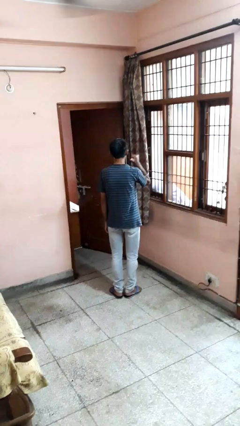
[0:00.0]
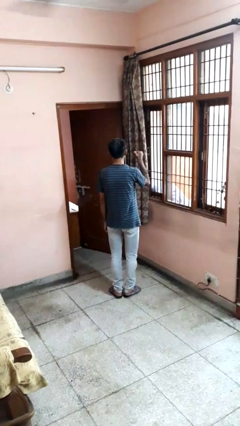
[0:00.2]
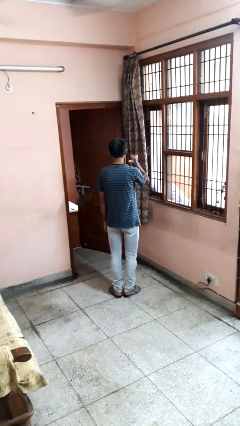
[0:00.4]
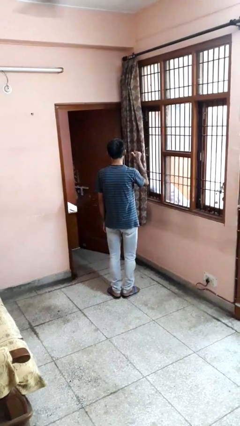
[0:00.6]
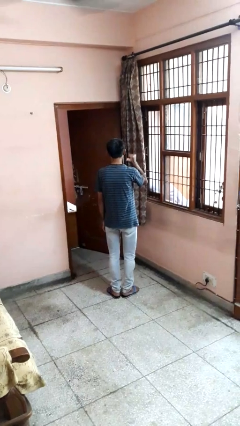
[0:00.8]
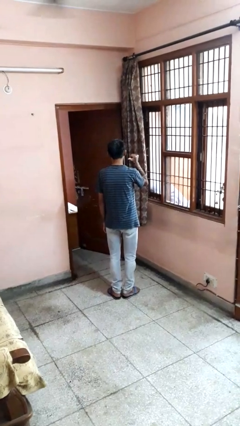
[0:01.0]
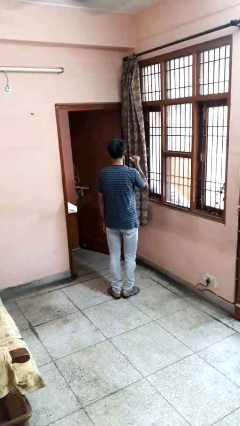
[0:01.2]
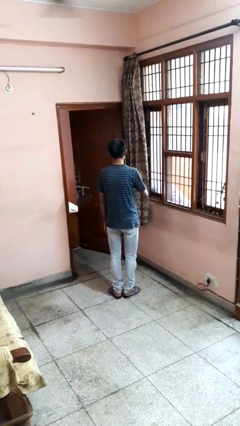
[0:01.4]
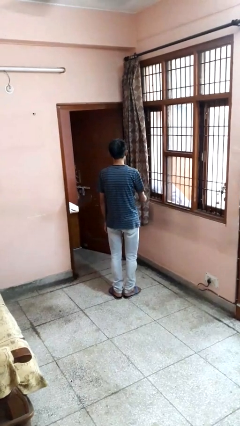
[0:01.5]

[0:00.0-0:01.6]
person gestures behind me

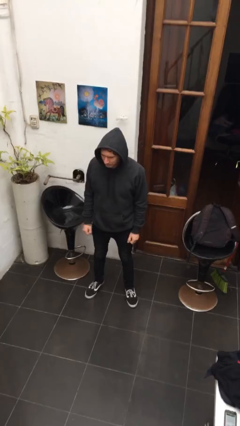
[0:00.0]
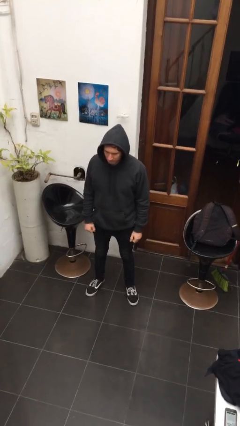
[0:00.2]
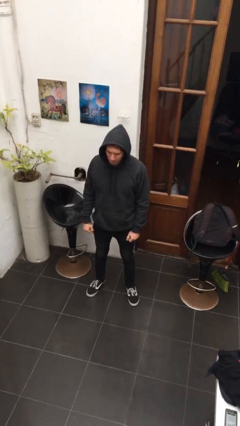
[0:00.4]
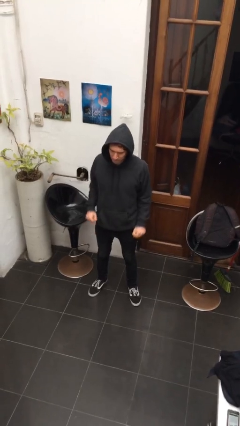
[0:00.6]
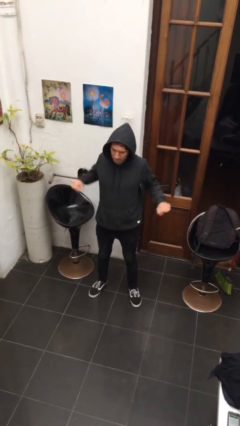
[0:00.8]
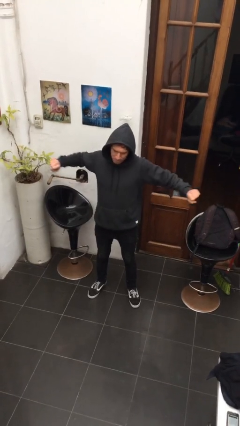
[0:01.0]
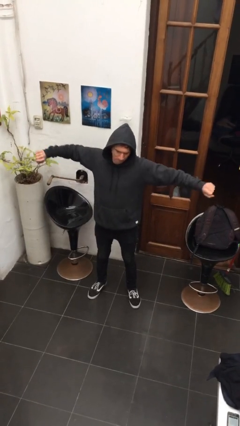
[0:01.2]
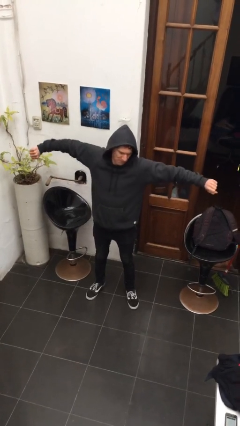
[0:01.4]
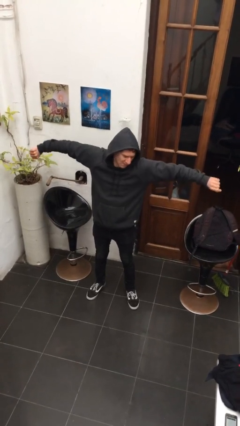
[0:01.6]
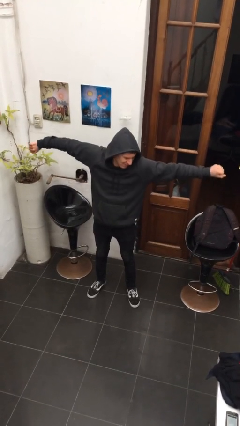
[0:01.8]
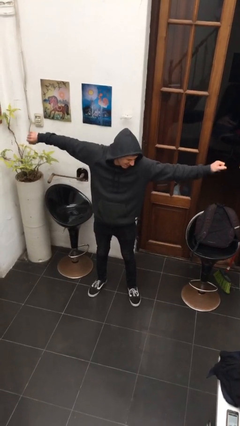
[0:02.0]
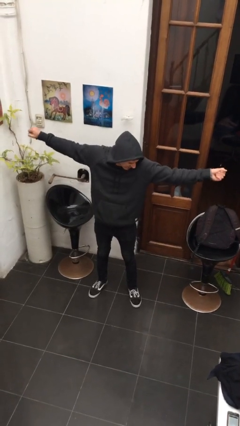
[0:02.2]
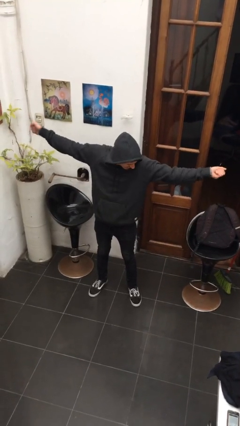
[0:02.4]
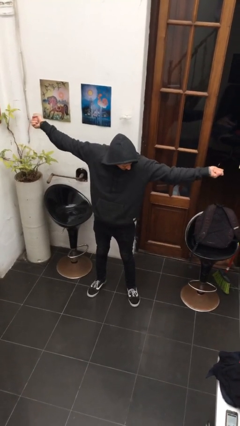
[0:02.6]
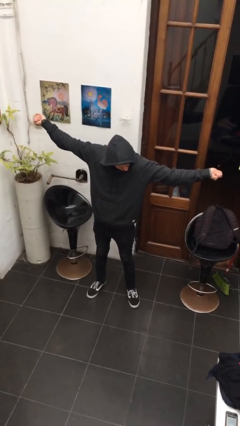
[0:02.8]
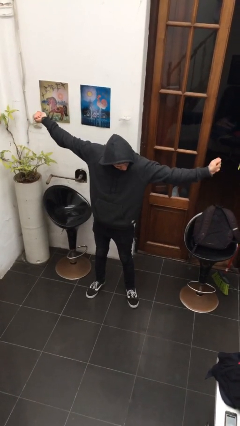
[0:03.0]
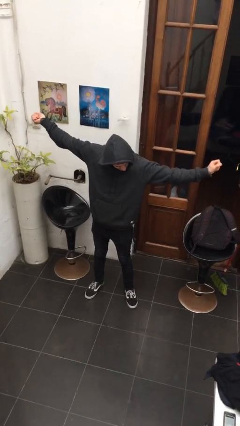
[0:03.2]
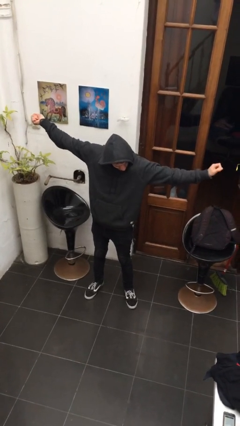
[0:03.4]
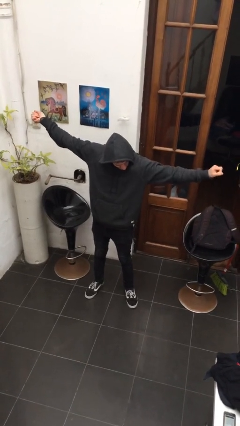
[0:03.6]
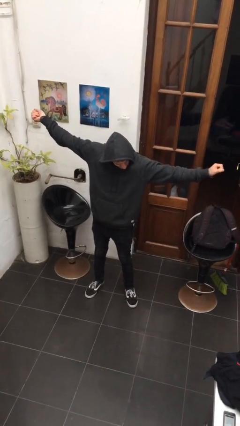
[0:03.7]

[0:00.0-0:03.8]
person stretches arms to side

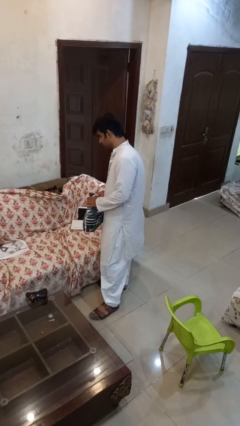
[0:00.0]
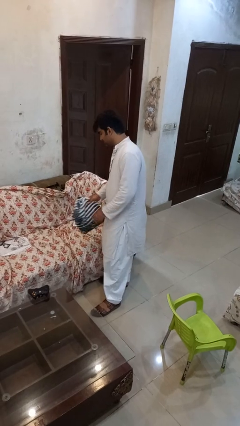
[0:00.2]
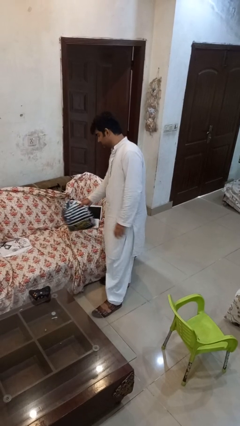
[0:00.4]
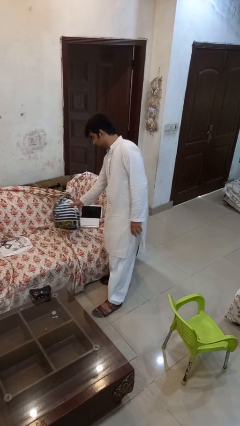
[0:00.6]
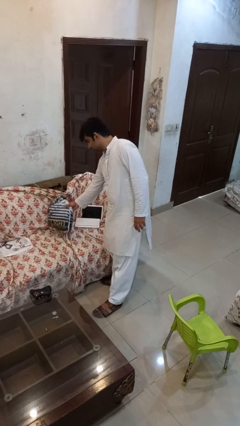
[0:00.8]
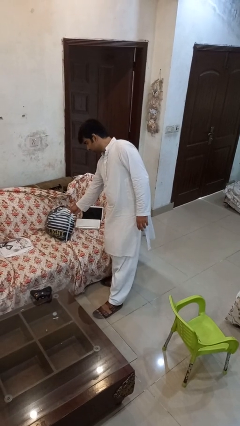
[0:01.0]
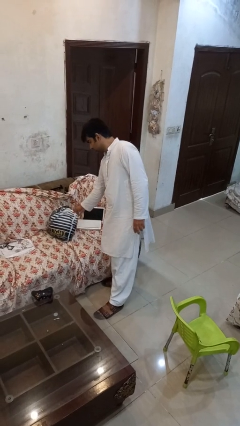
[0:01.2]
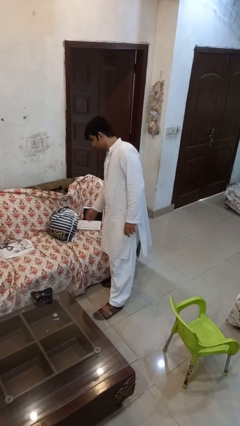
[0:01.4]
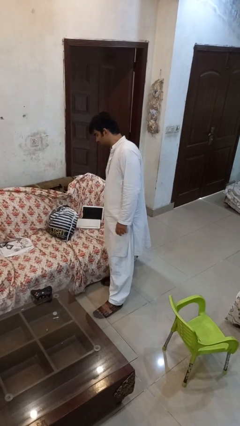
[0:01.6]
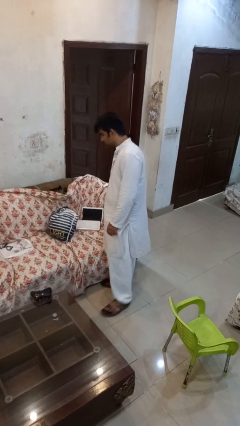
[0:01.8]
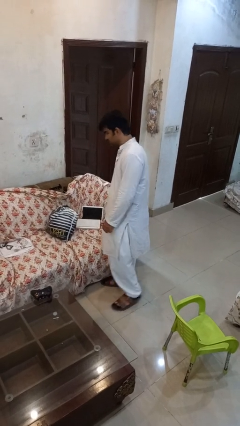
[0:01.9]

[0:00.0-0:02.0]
person puts down object on couch

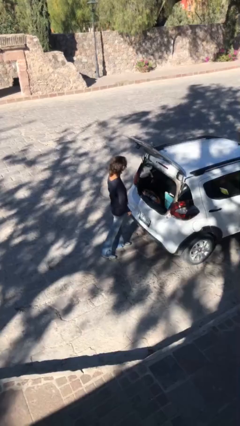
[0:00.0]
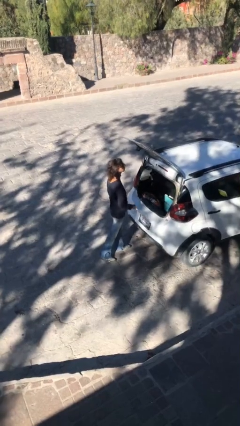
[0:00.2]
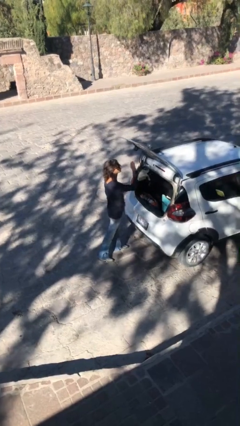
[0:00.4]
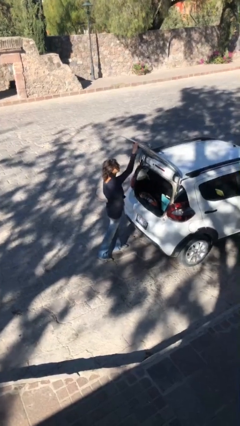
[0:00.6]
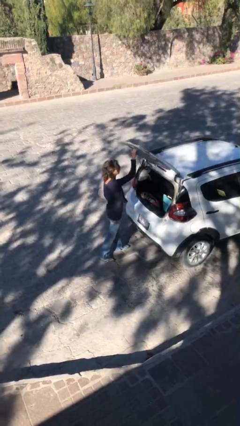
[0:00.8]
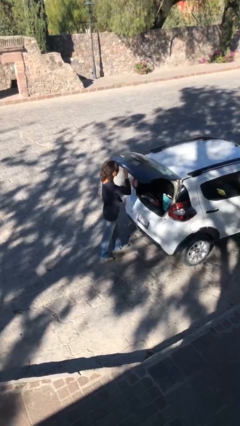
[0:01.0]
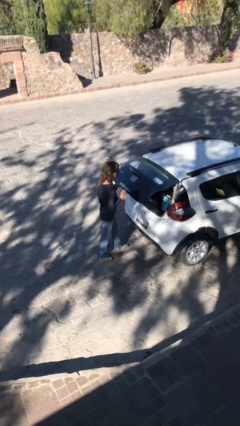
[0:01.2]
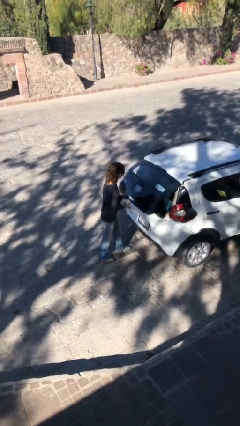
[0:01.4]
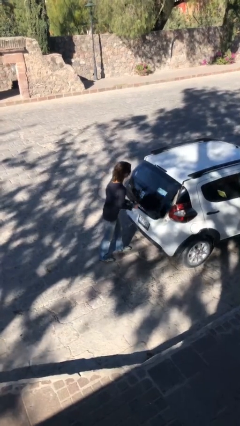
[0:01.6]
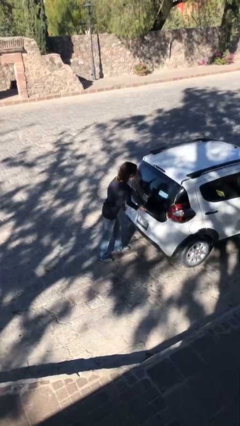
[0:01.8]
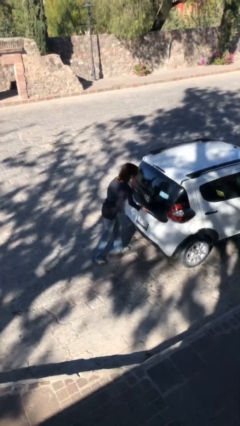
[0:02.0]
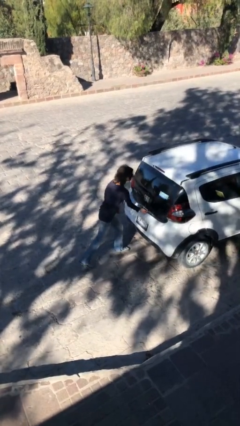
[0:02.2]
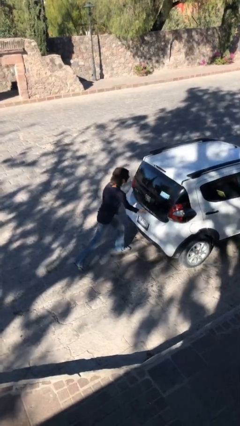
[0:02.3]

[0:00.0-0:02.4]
person closes car trunk

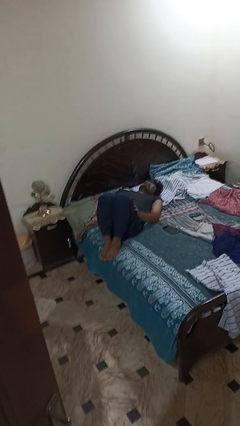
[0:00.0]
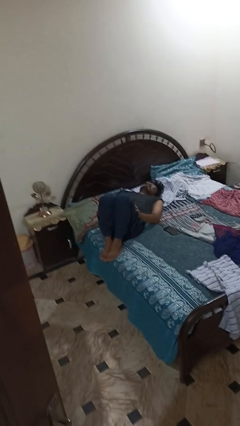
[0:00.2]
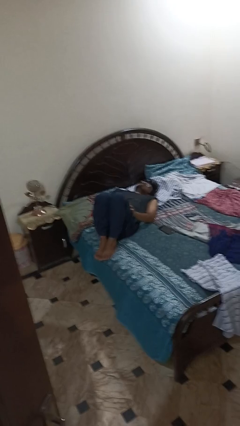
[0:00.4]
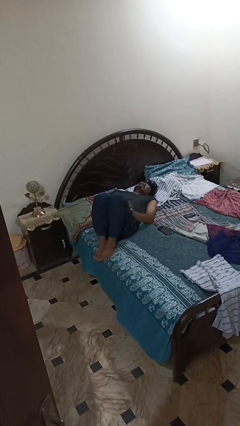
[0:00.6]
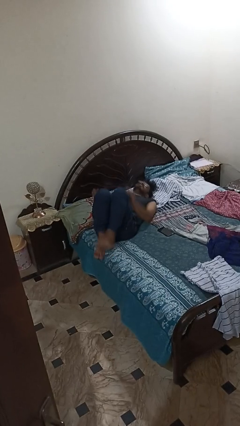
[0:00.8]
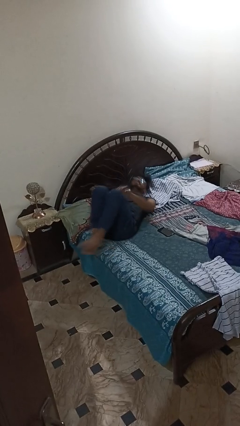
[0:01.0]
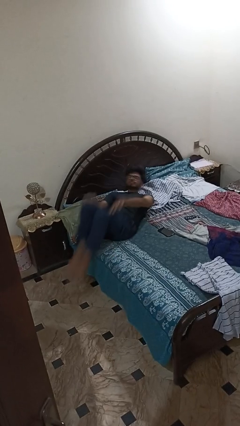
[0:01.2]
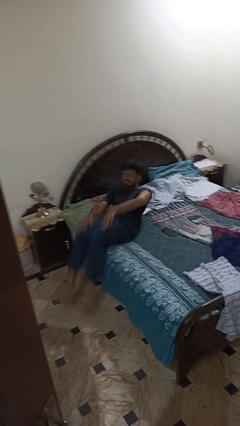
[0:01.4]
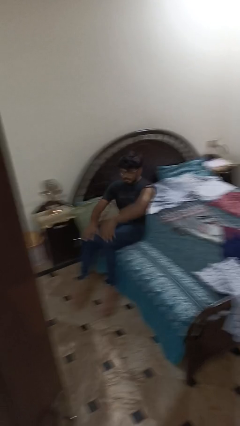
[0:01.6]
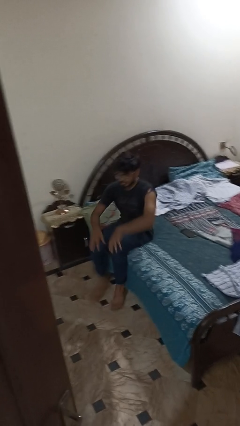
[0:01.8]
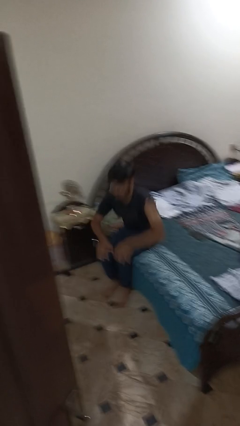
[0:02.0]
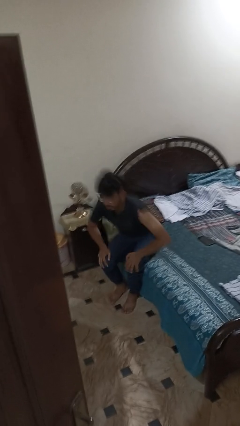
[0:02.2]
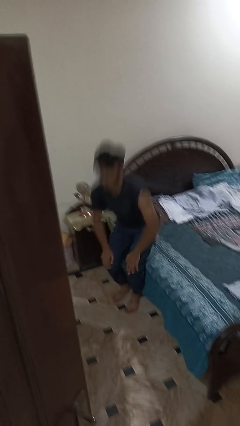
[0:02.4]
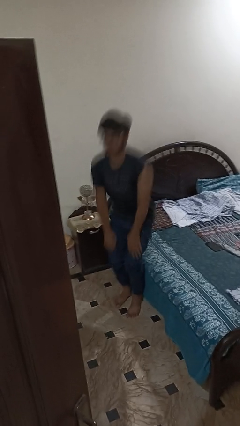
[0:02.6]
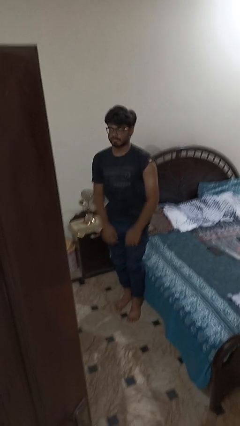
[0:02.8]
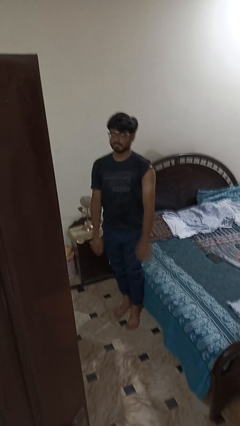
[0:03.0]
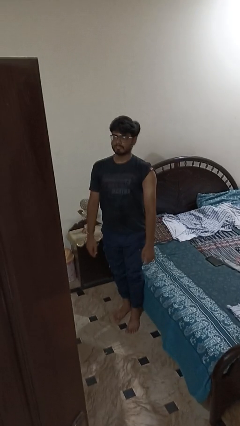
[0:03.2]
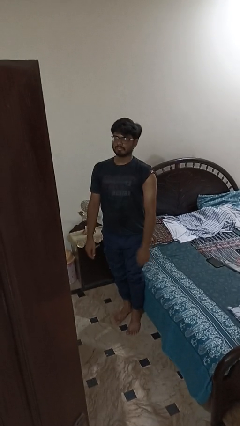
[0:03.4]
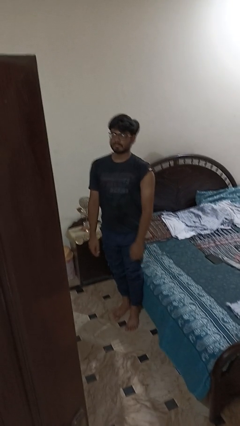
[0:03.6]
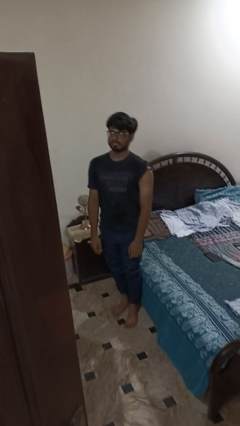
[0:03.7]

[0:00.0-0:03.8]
person stands up

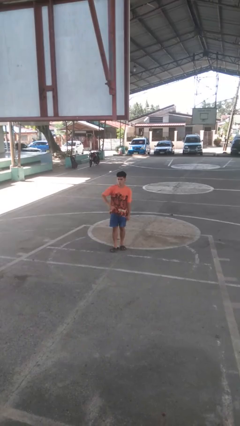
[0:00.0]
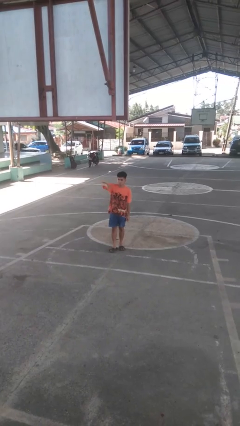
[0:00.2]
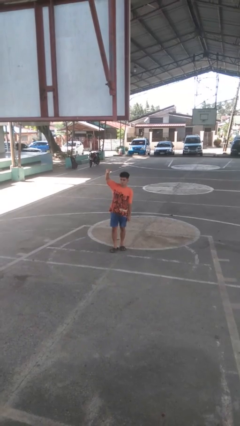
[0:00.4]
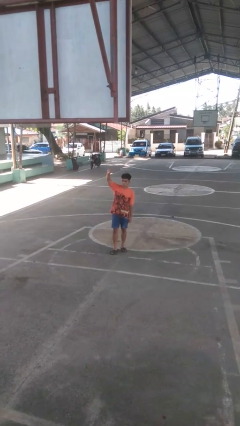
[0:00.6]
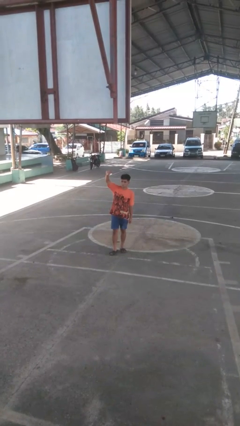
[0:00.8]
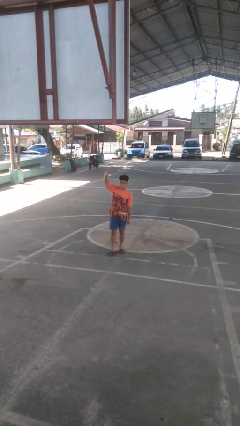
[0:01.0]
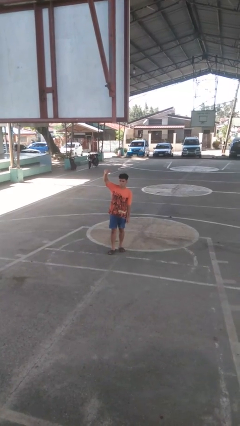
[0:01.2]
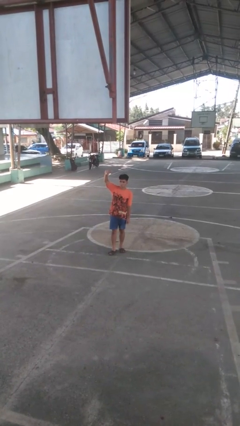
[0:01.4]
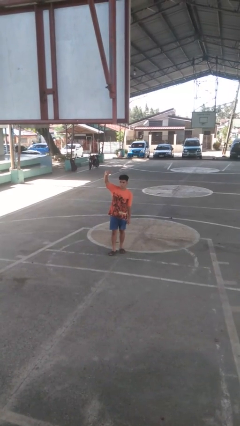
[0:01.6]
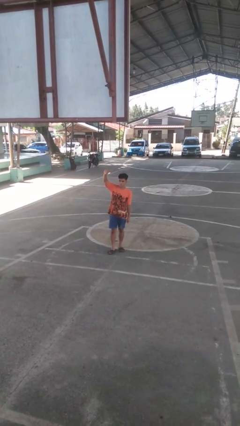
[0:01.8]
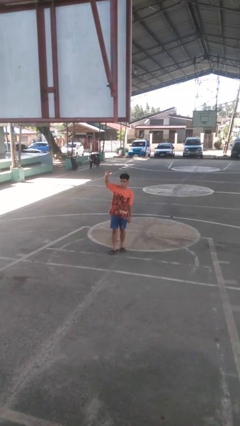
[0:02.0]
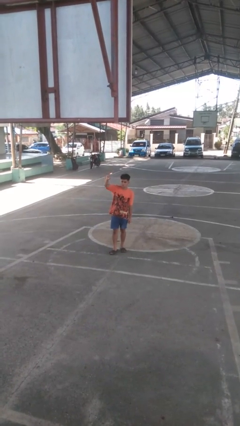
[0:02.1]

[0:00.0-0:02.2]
person gestures swipe up

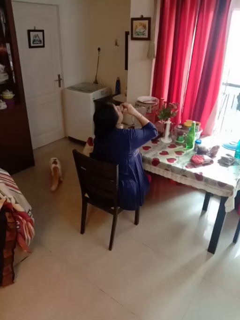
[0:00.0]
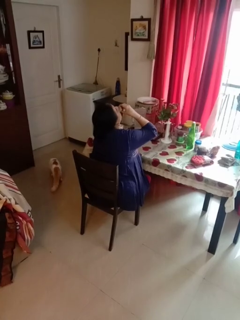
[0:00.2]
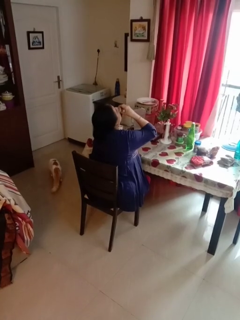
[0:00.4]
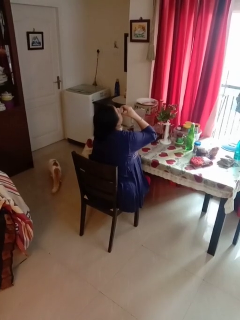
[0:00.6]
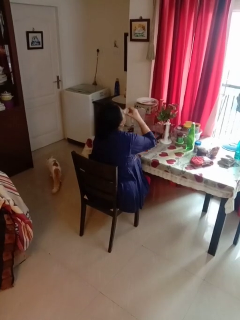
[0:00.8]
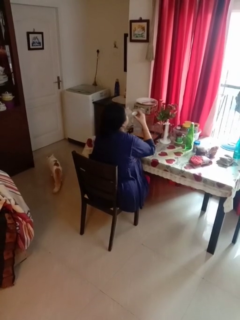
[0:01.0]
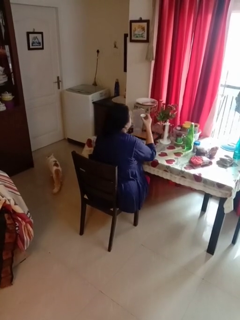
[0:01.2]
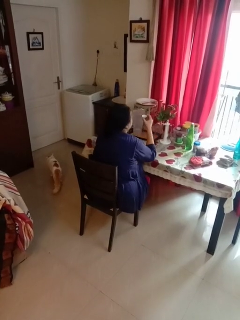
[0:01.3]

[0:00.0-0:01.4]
person drinks from shotglass

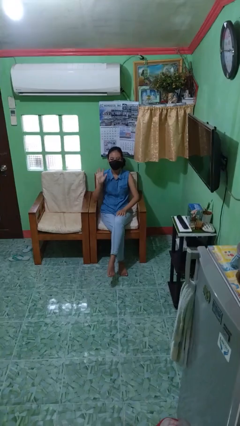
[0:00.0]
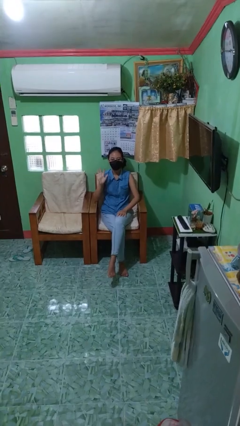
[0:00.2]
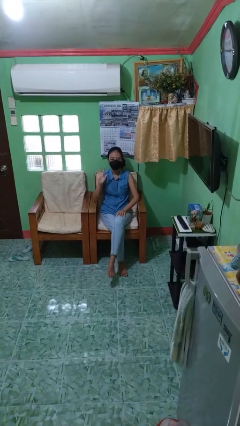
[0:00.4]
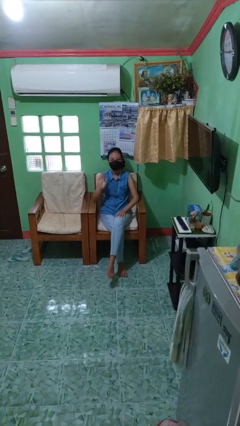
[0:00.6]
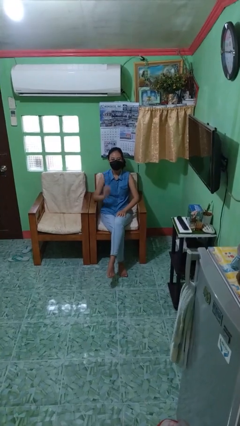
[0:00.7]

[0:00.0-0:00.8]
person gestures number five
